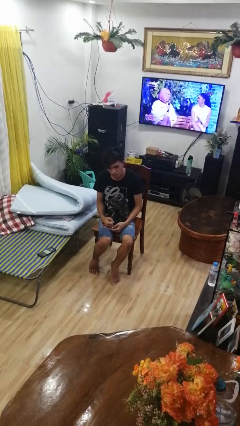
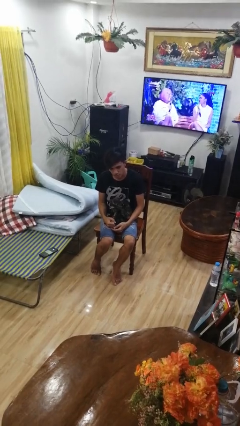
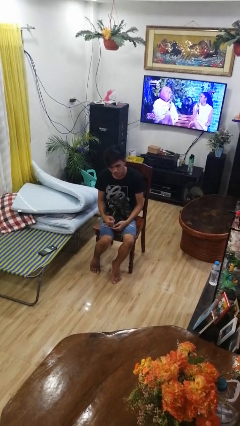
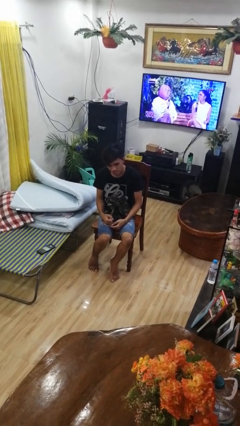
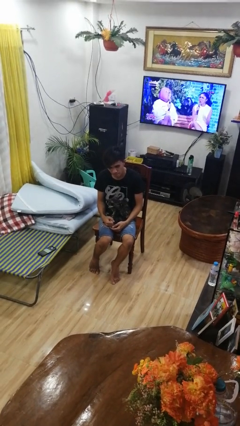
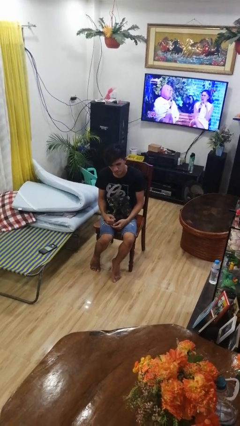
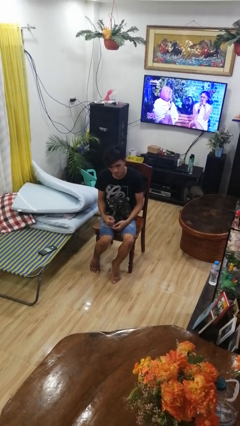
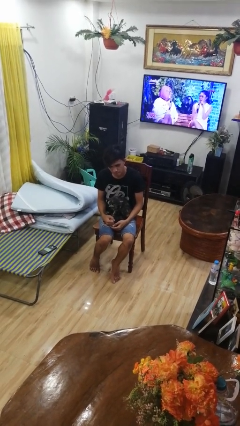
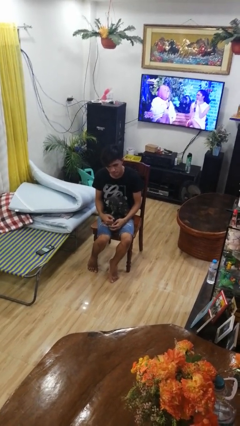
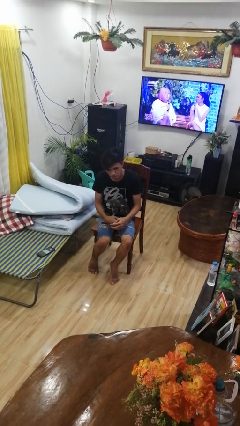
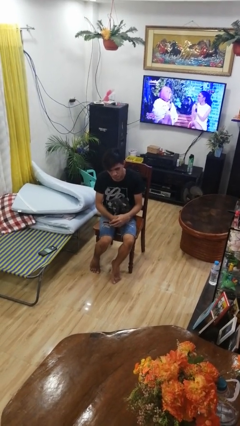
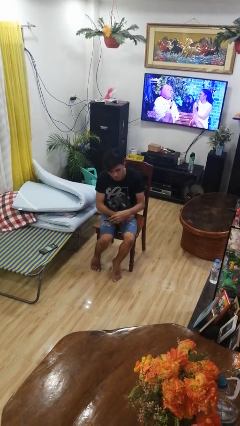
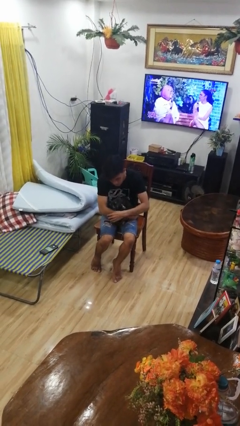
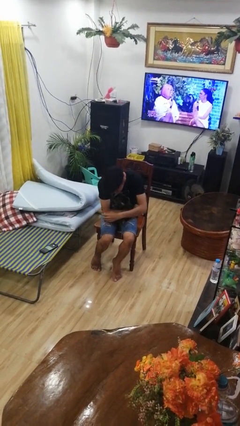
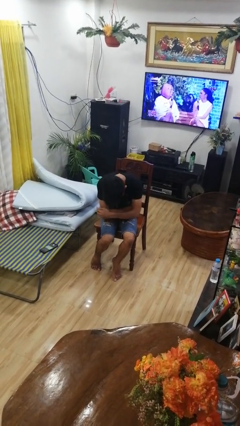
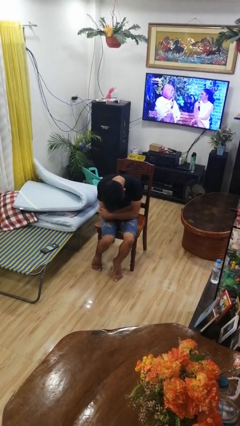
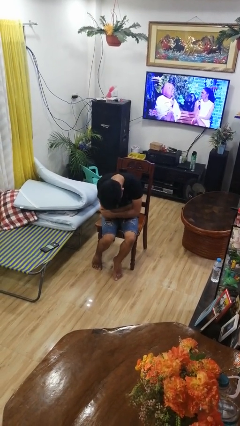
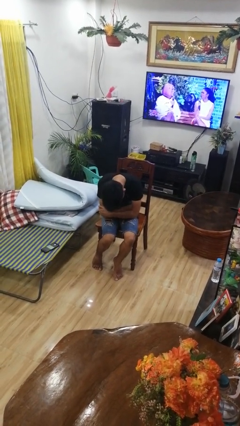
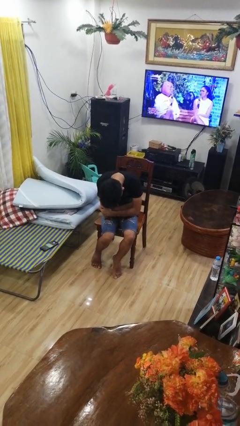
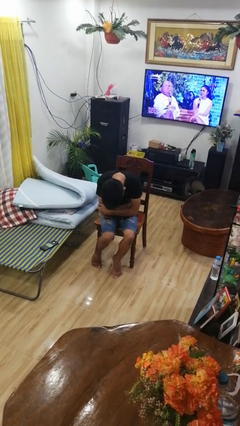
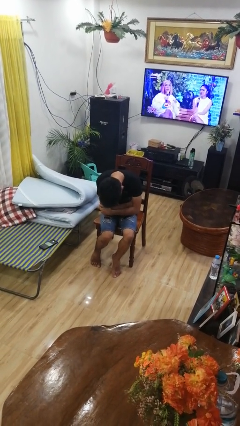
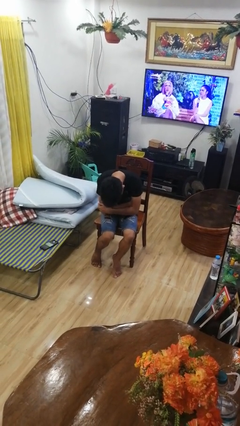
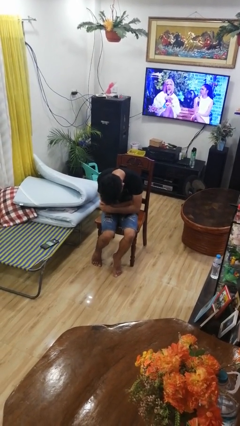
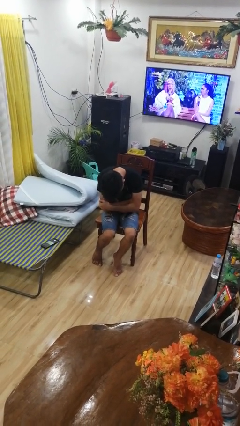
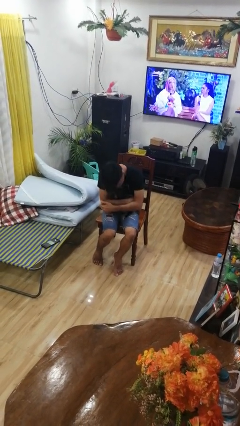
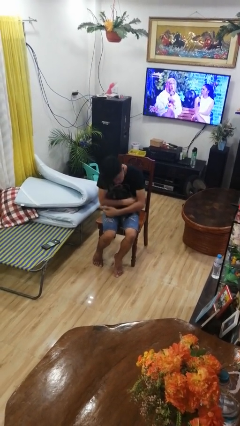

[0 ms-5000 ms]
person hugs cat

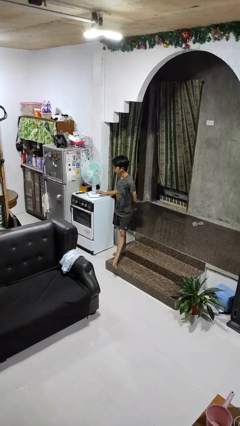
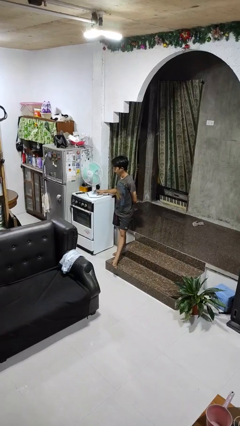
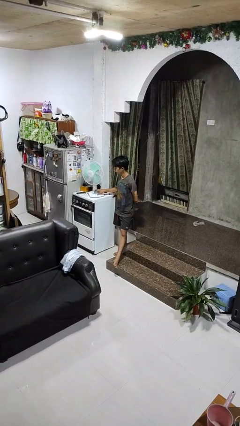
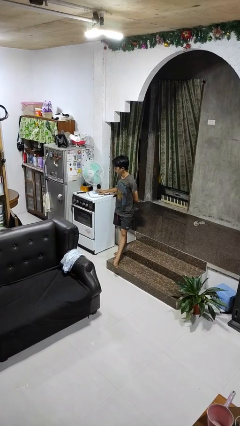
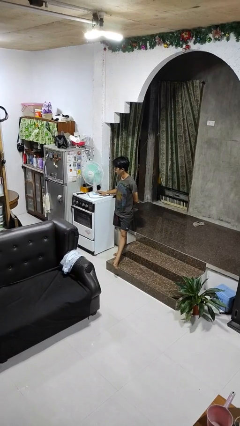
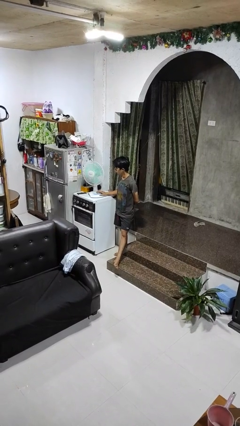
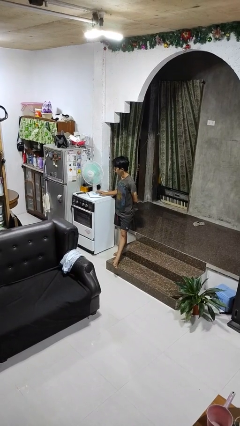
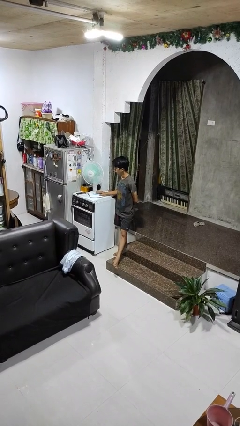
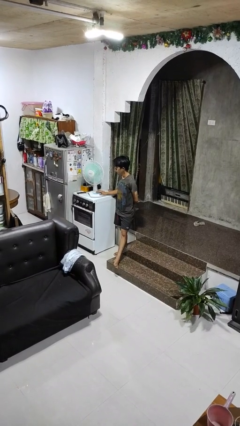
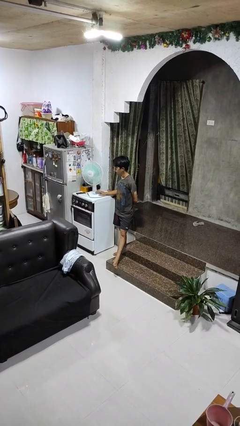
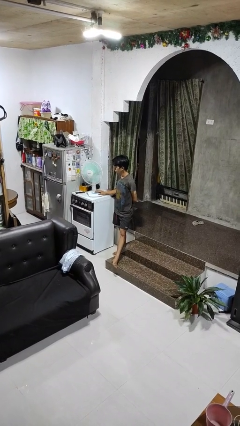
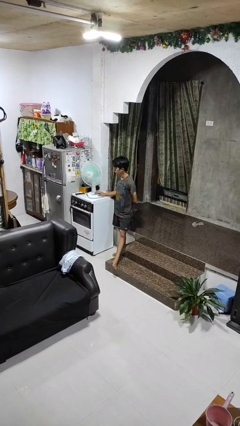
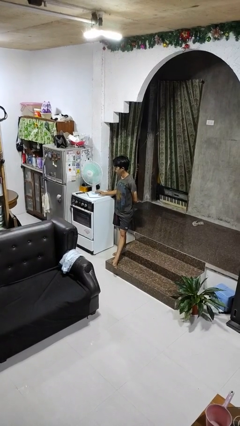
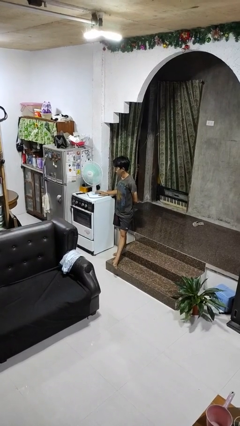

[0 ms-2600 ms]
person turns on fan

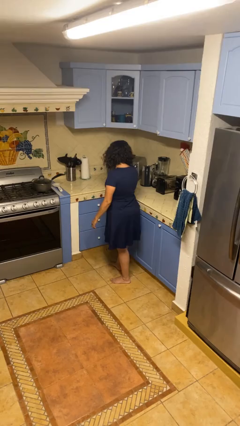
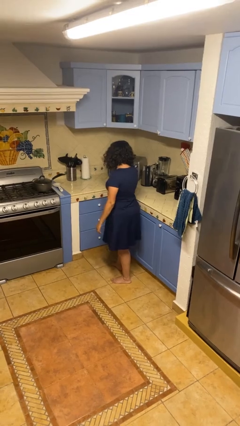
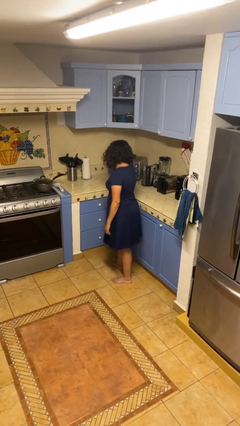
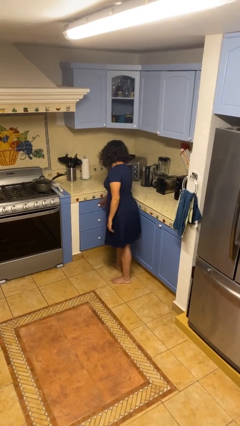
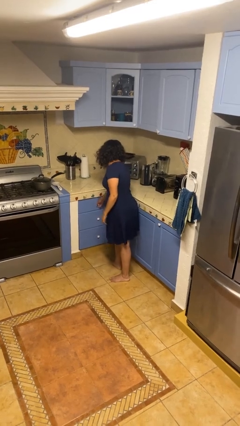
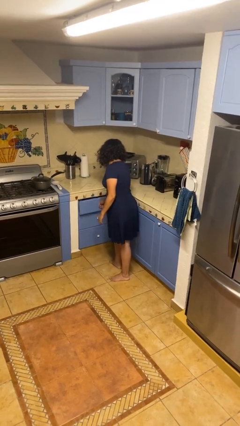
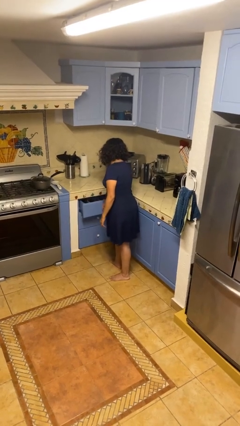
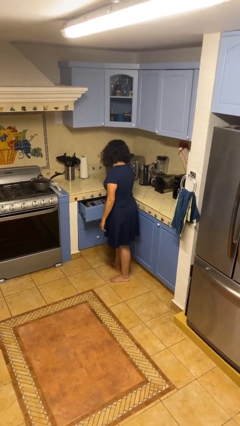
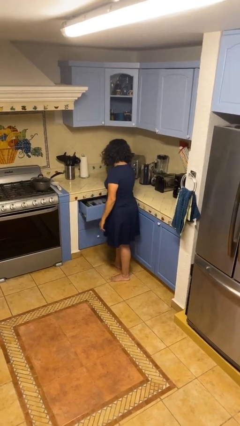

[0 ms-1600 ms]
person opens kitchen drawer

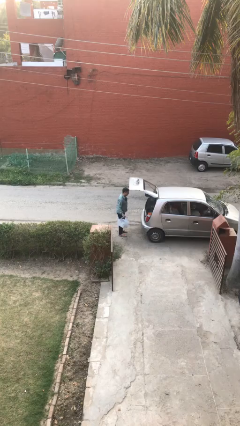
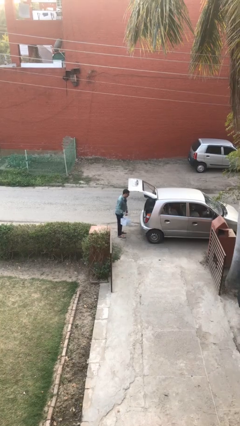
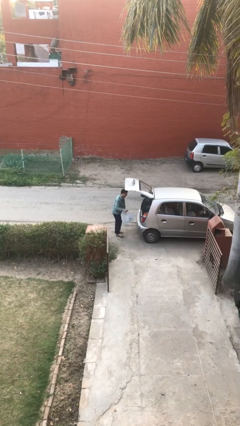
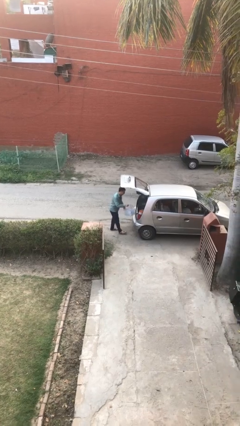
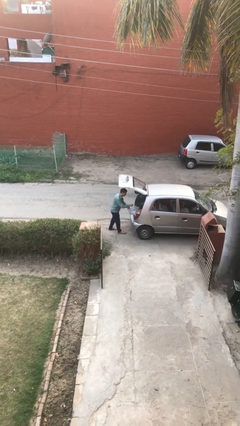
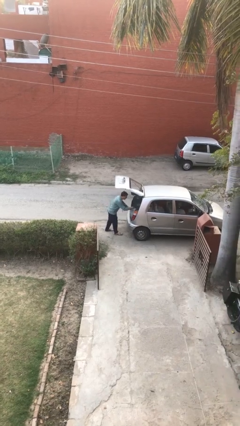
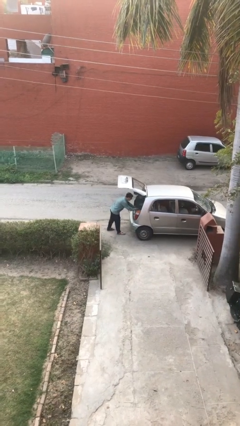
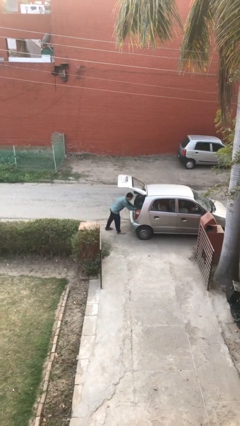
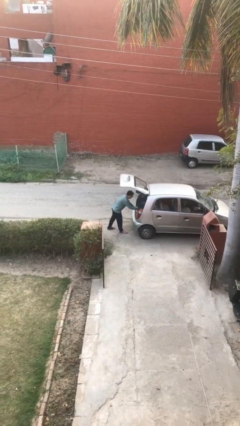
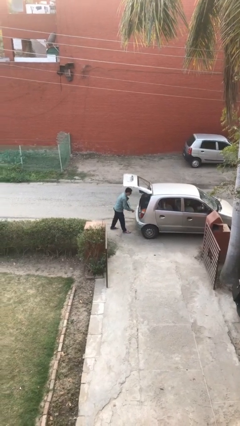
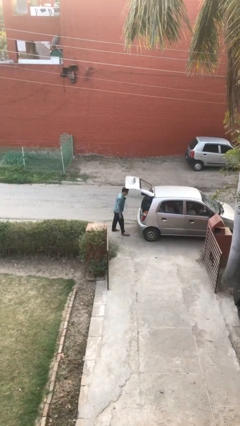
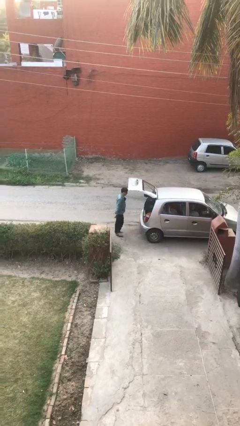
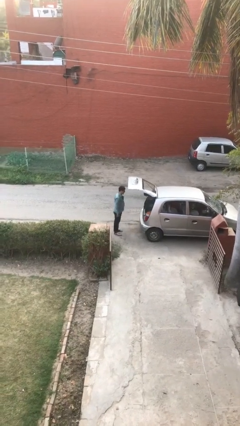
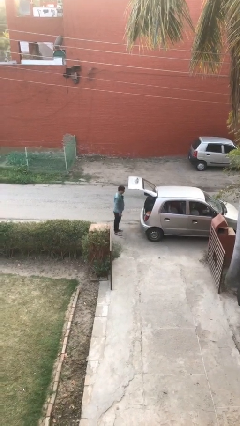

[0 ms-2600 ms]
person loads car

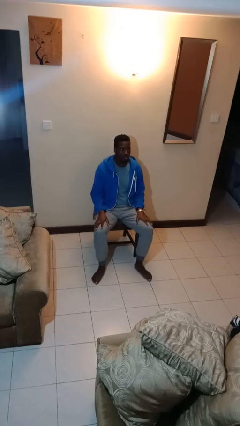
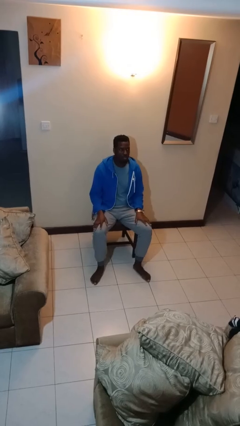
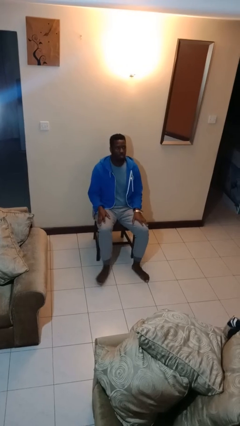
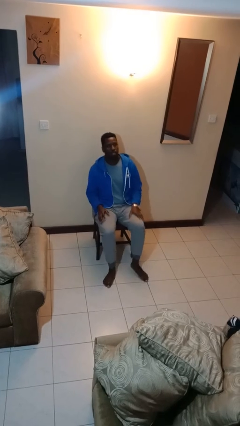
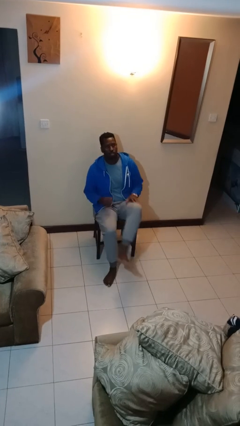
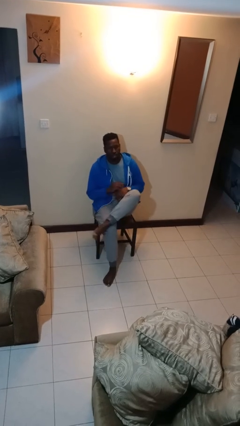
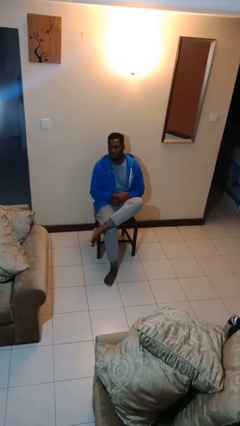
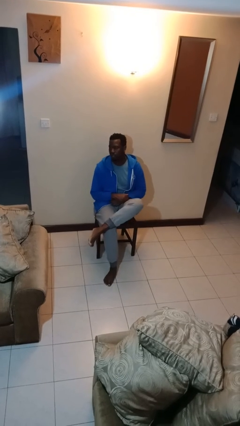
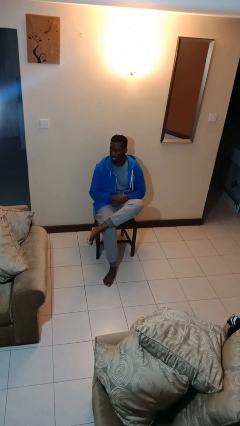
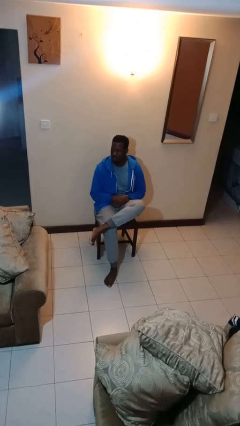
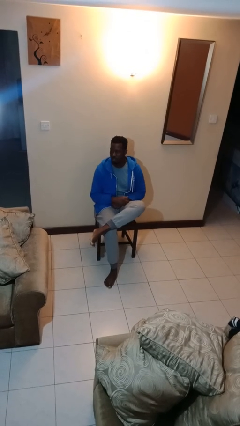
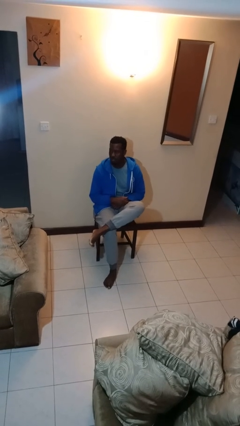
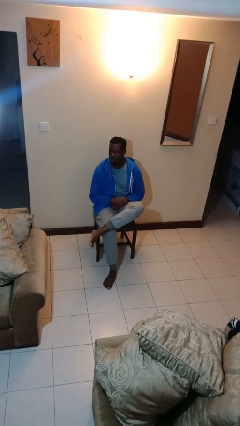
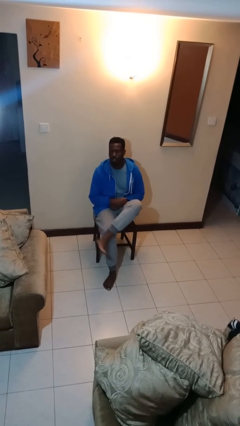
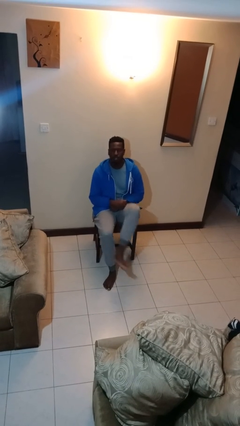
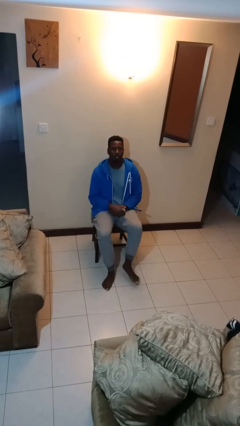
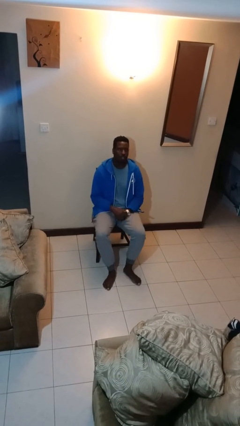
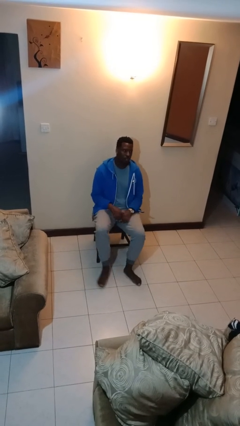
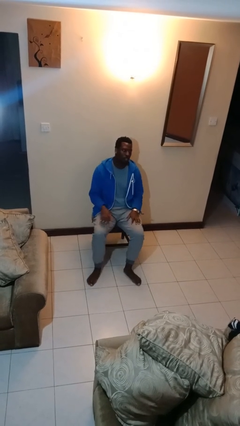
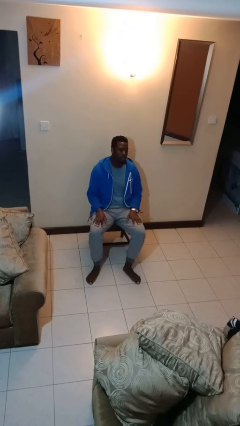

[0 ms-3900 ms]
person crosses legs

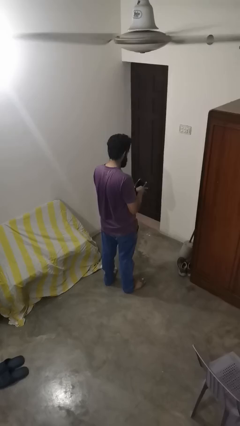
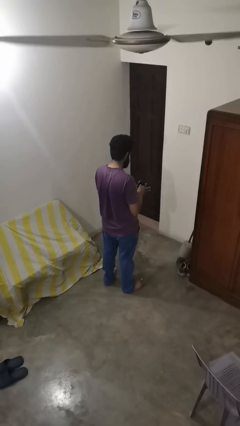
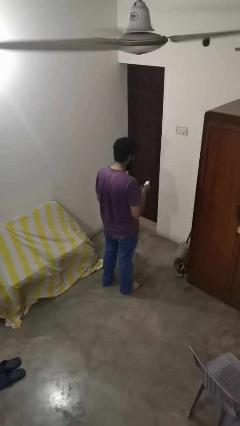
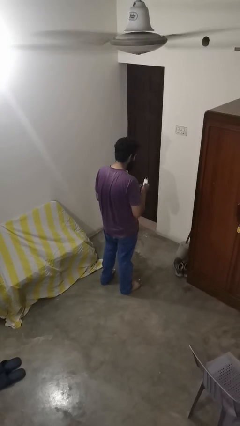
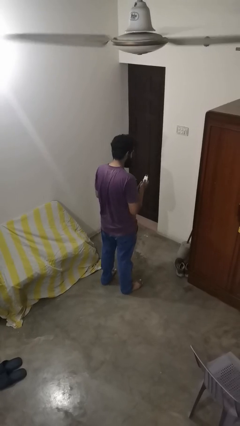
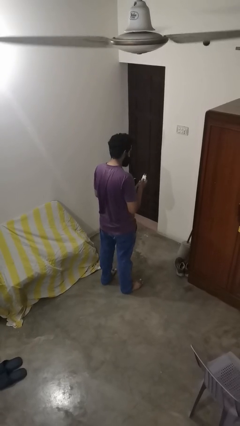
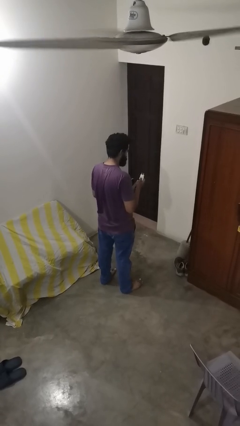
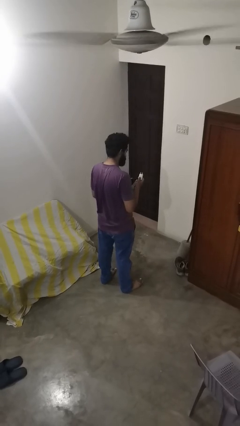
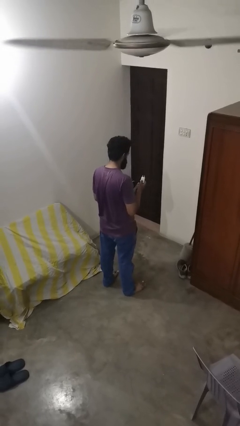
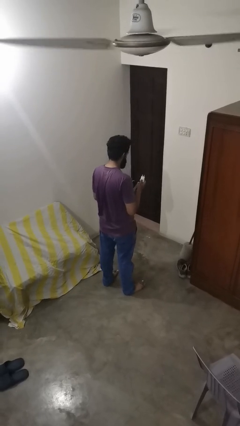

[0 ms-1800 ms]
person takes object from purse
